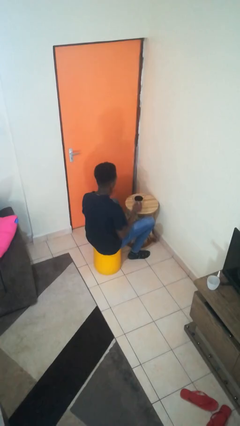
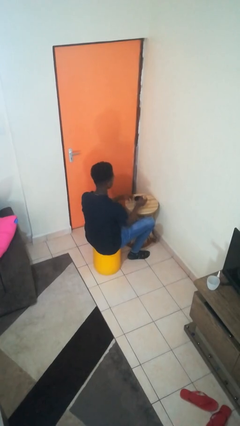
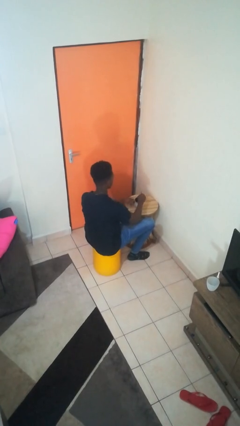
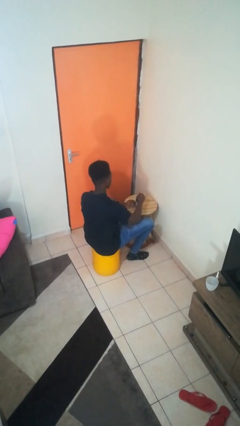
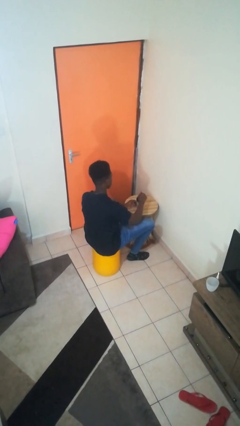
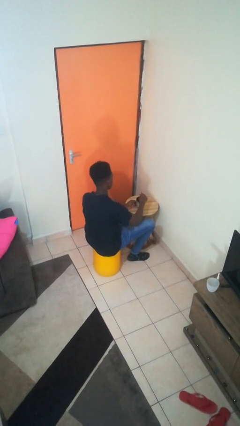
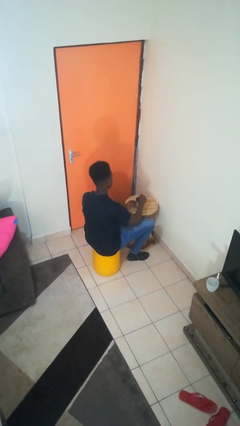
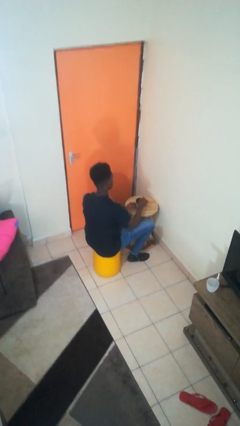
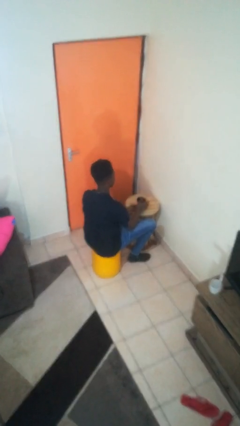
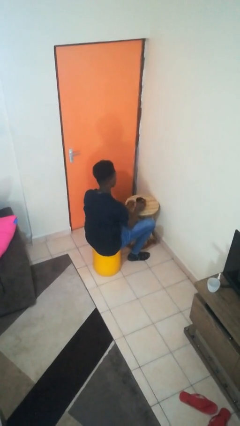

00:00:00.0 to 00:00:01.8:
person stirs mug

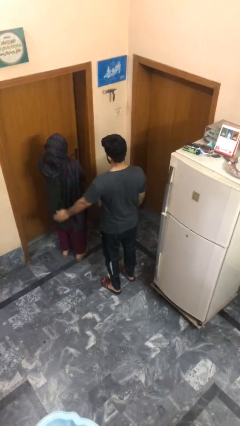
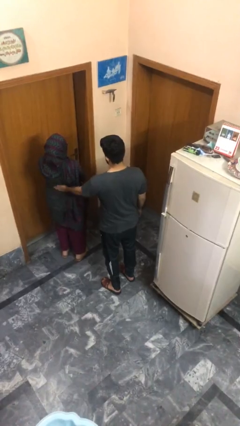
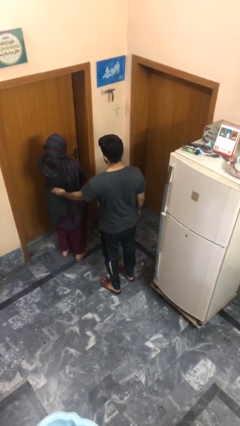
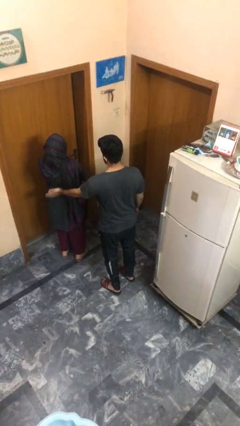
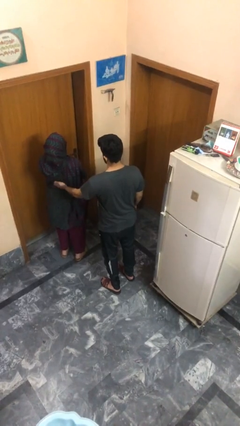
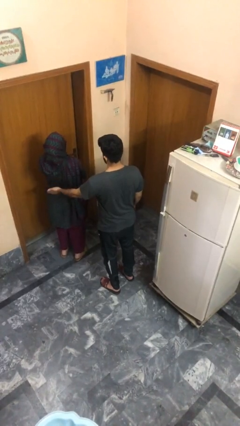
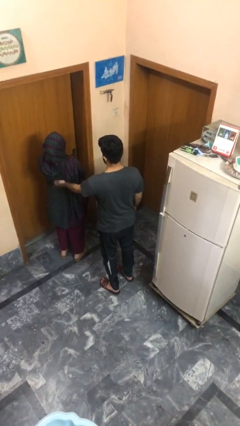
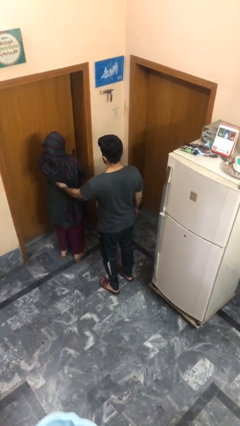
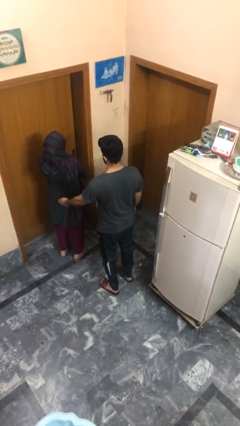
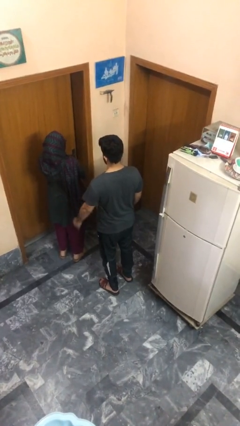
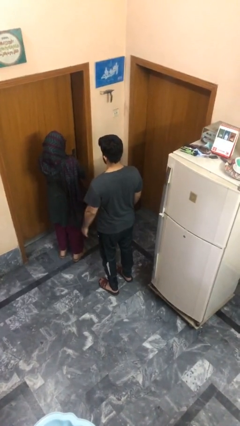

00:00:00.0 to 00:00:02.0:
person touches back of person

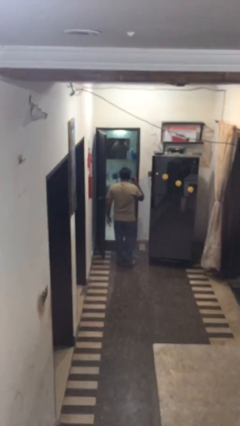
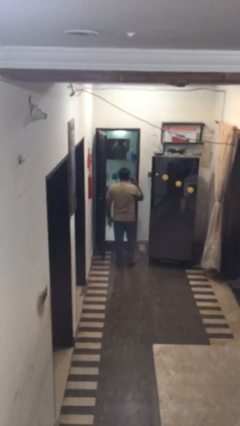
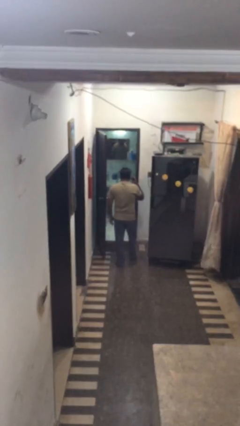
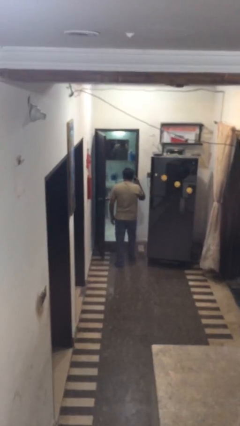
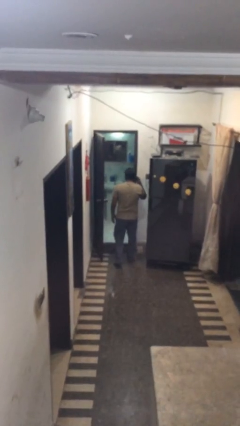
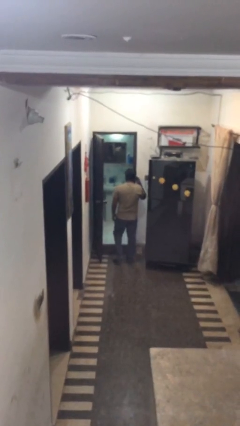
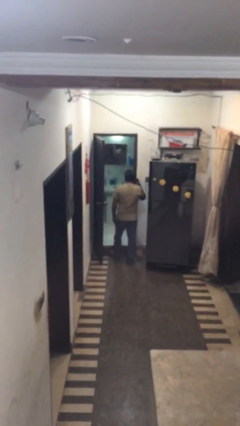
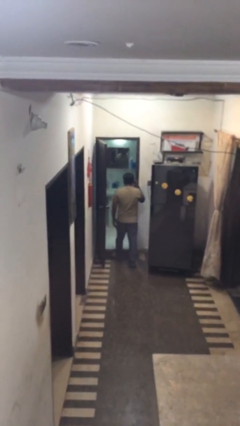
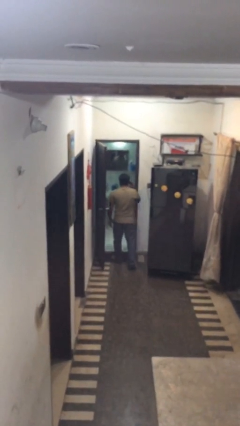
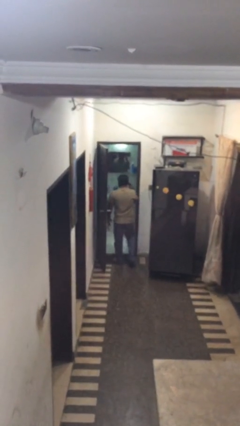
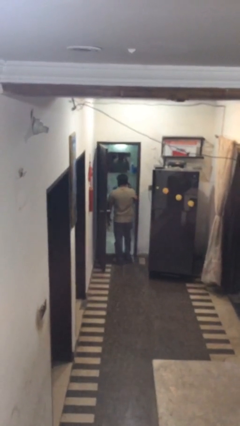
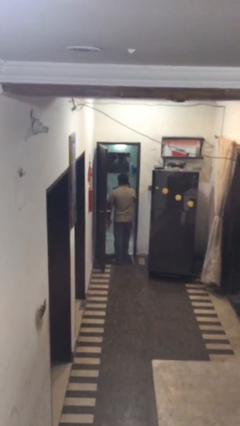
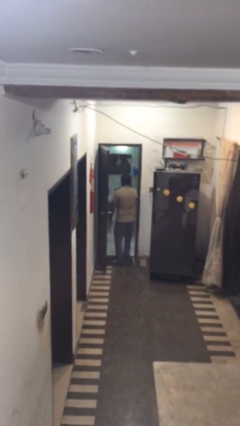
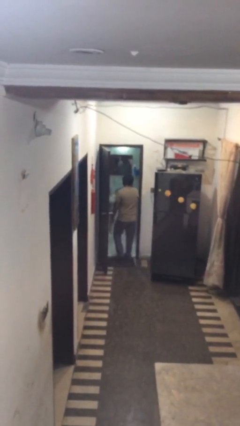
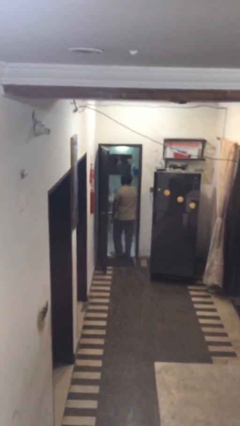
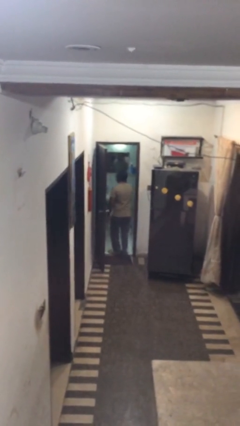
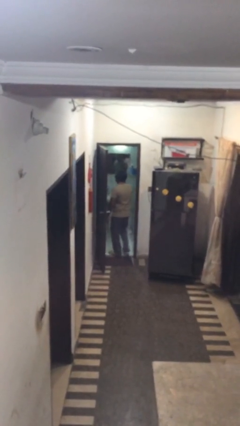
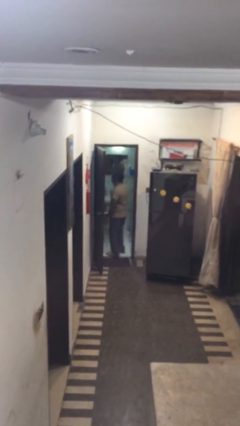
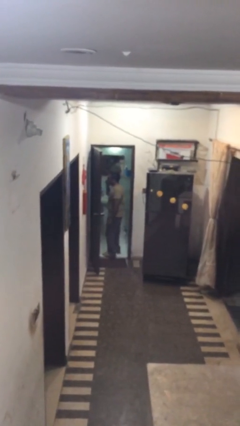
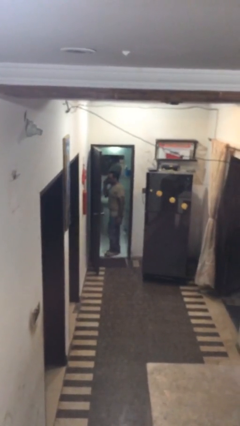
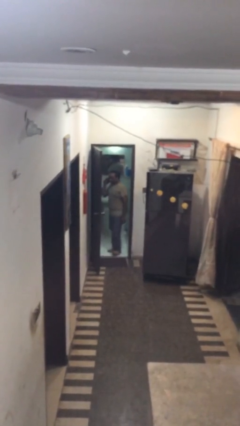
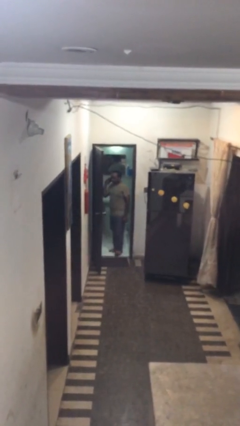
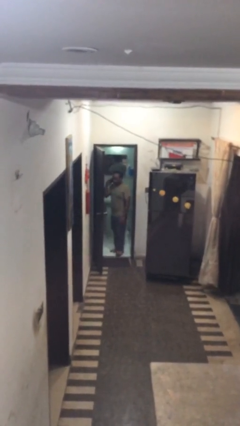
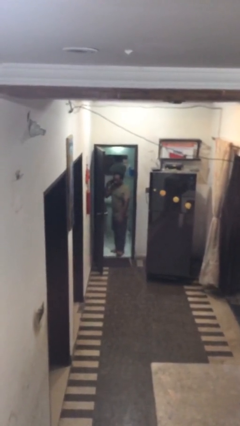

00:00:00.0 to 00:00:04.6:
person exits scene through structure

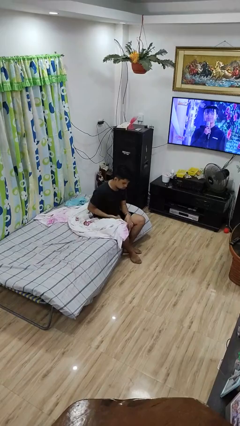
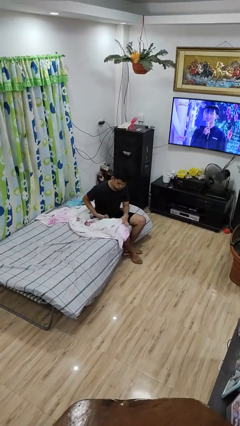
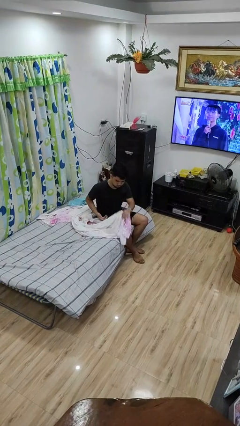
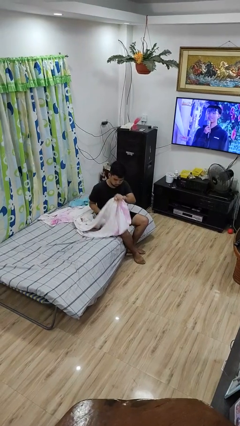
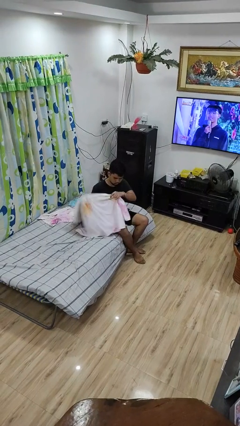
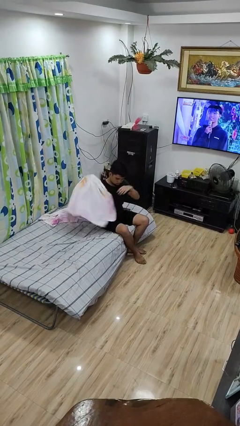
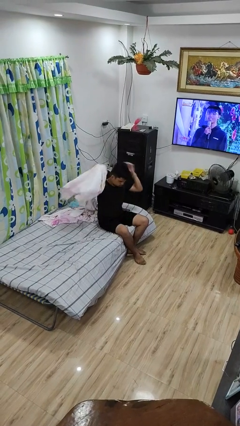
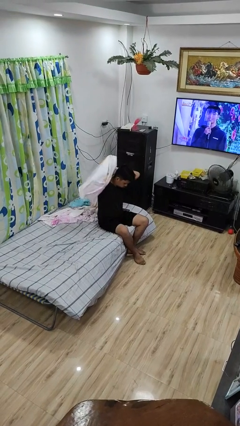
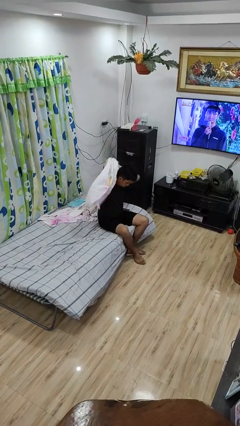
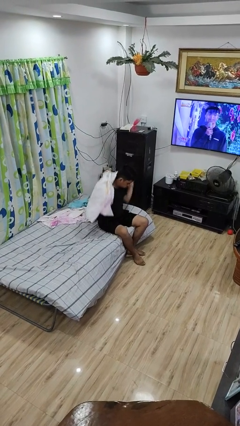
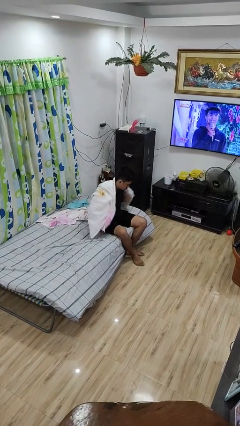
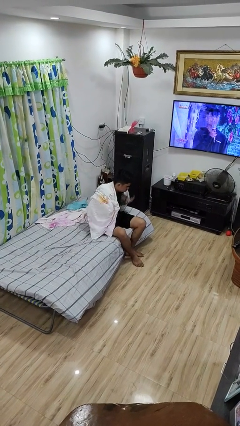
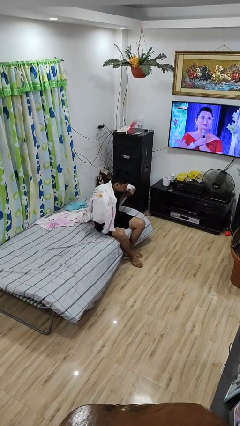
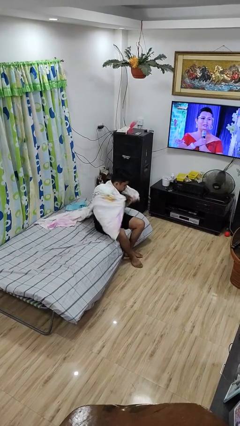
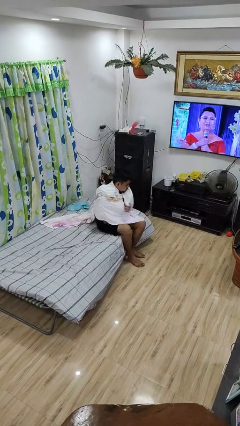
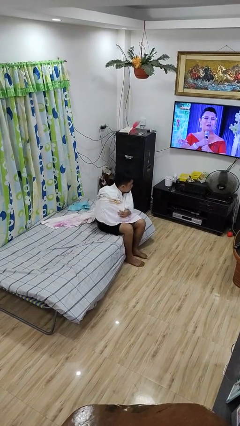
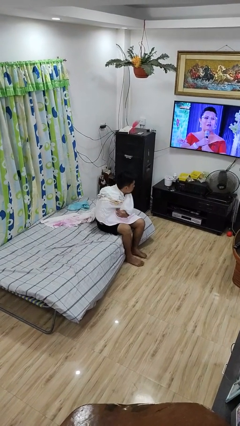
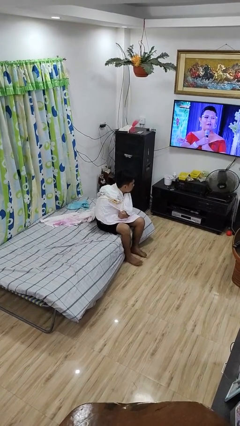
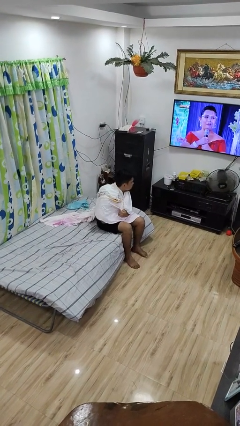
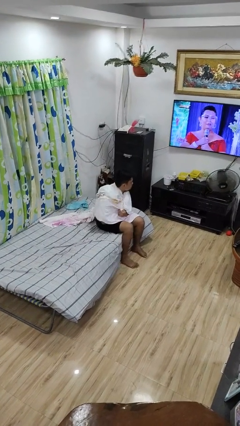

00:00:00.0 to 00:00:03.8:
person covers with blanket

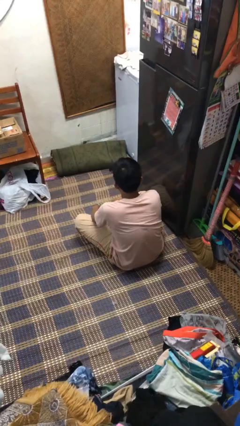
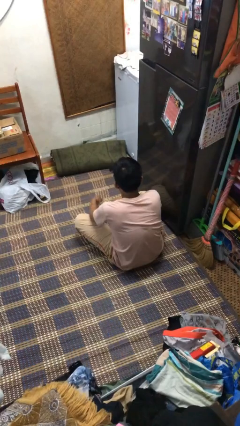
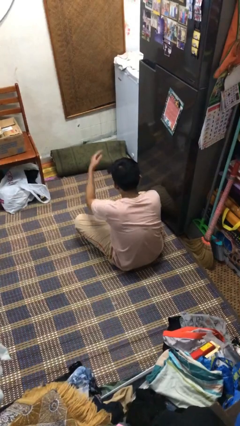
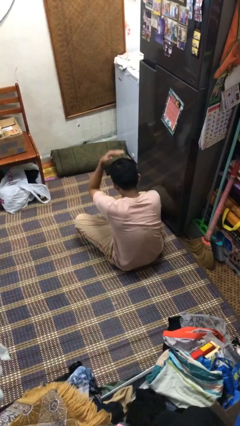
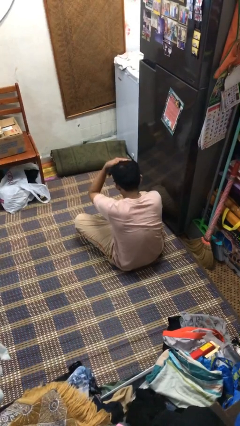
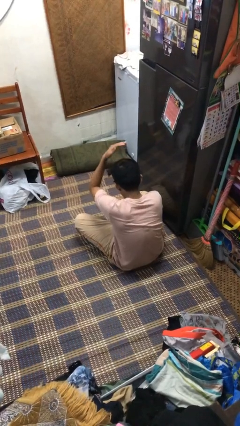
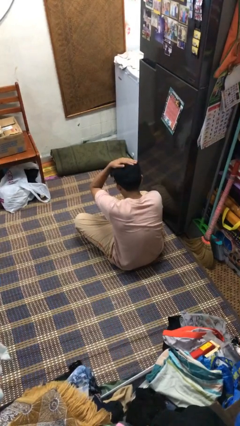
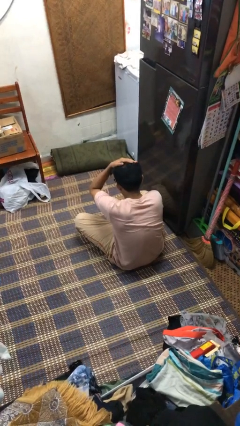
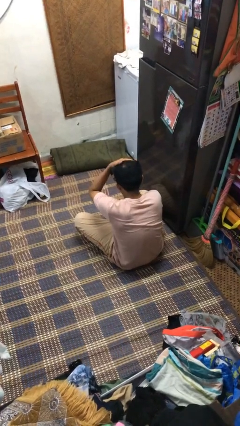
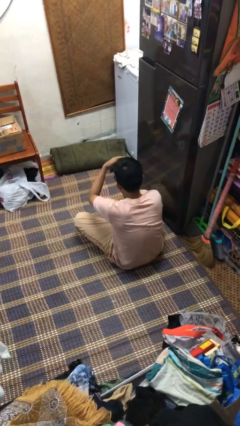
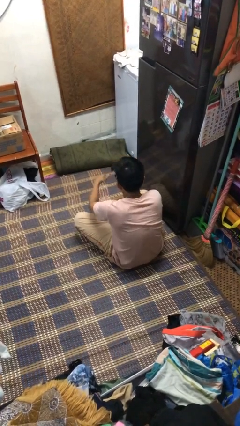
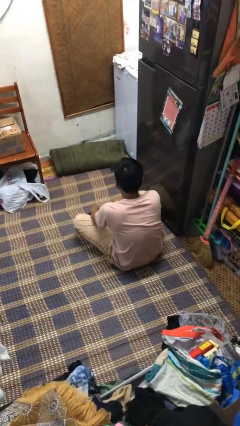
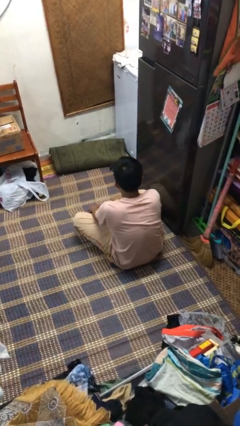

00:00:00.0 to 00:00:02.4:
person pats head

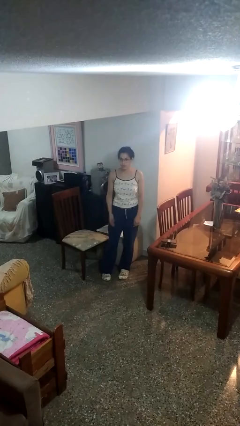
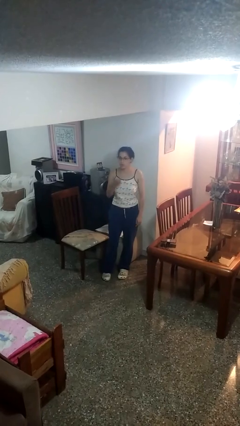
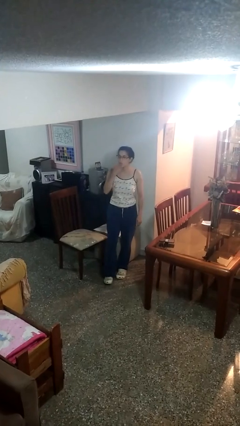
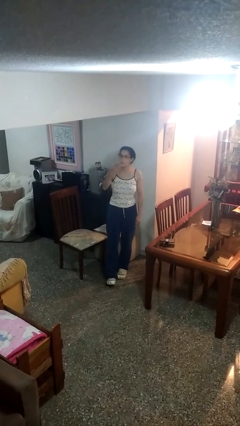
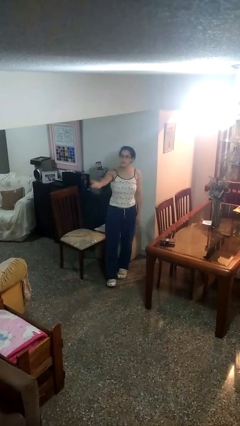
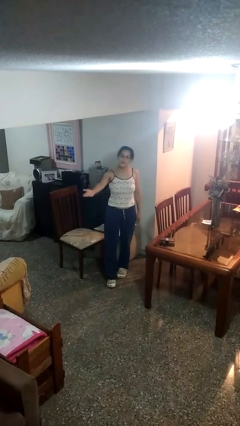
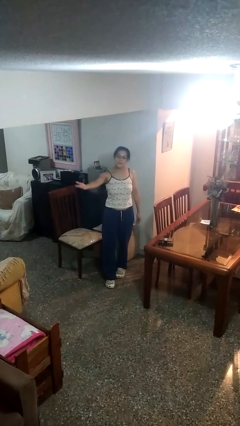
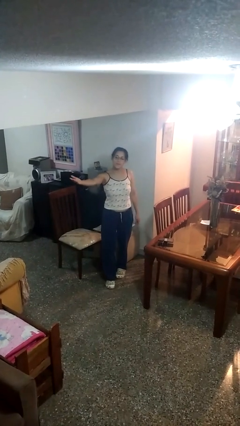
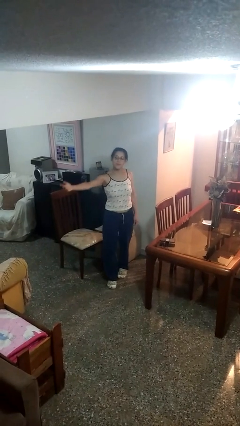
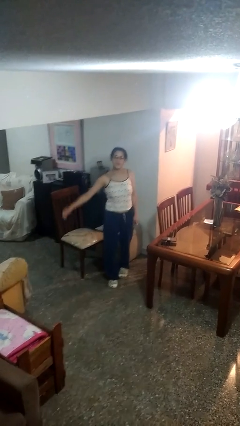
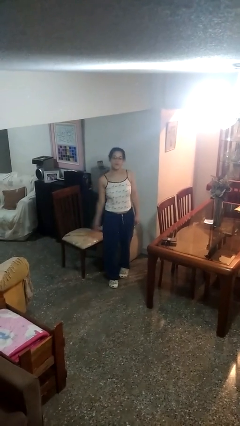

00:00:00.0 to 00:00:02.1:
person gestures blow kiss

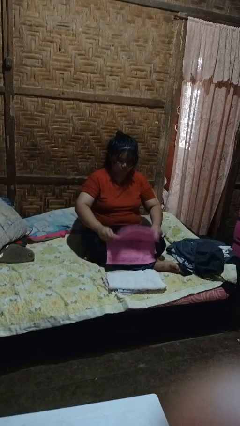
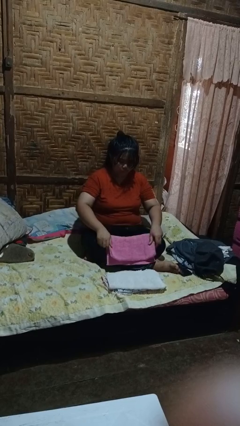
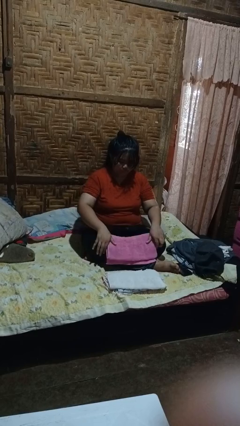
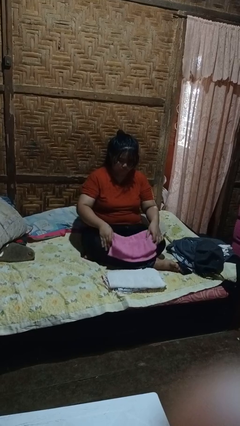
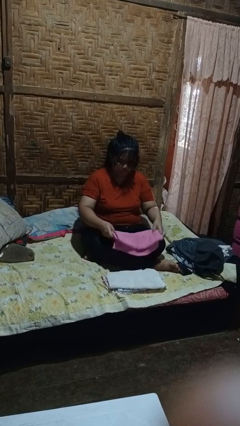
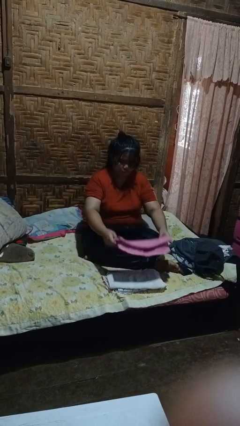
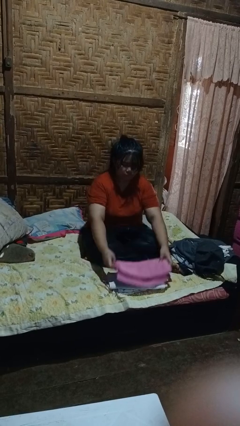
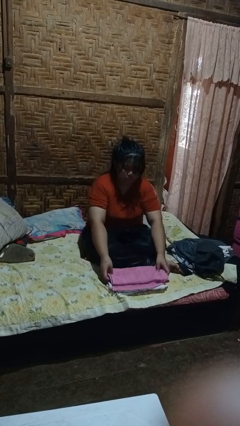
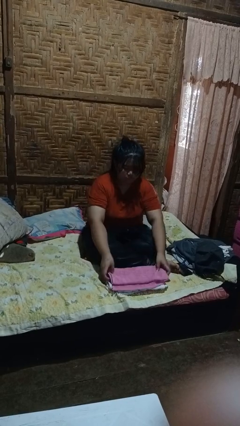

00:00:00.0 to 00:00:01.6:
person folds towel
